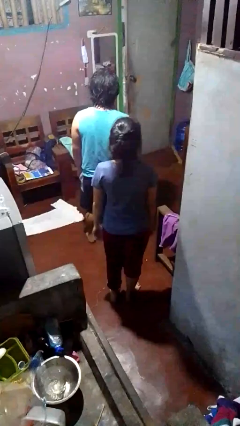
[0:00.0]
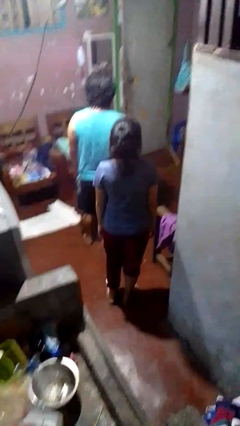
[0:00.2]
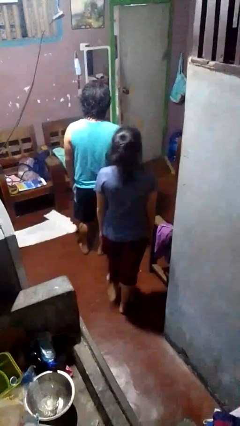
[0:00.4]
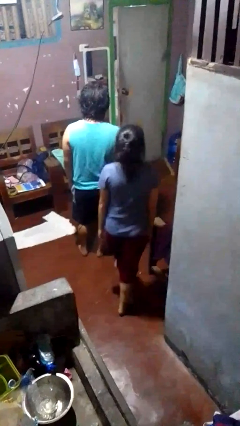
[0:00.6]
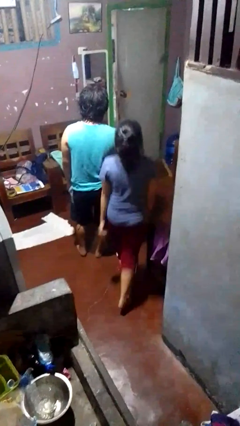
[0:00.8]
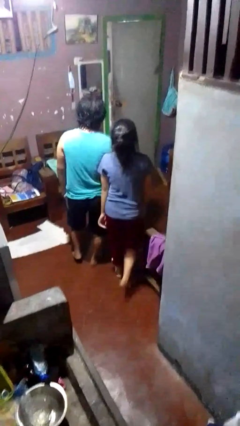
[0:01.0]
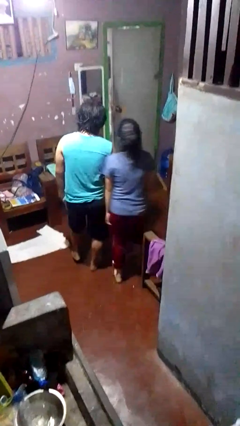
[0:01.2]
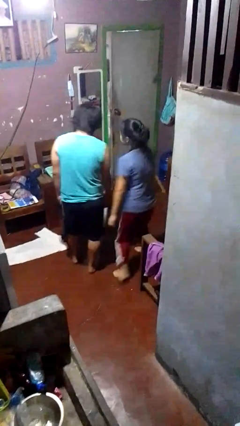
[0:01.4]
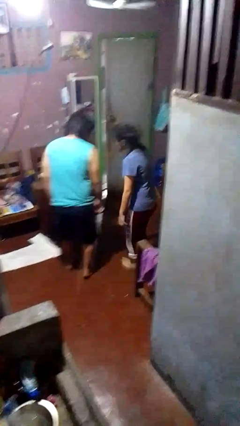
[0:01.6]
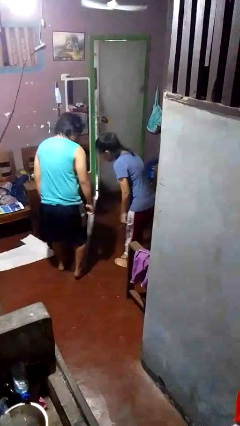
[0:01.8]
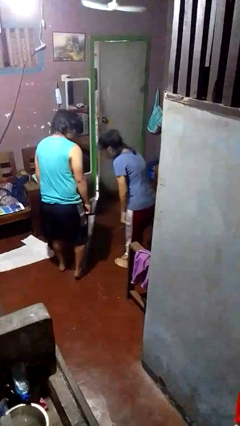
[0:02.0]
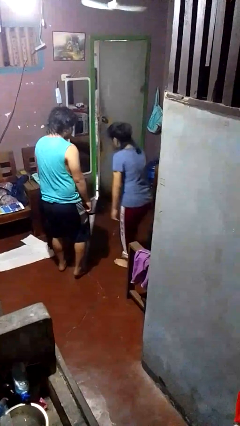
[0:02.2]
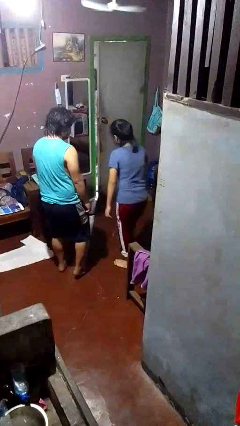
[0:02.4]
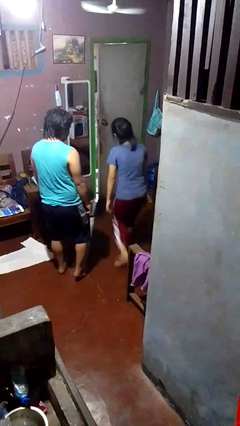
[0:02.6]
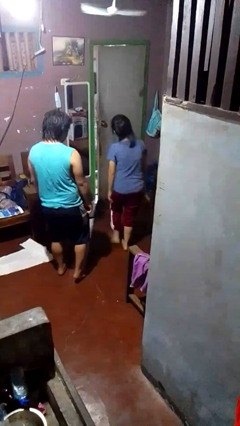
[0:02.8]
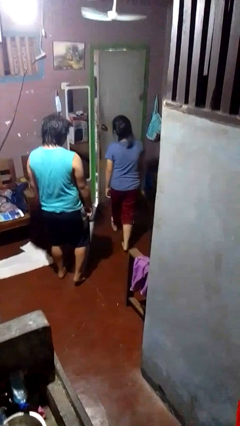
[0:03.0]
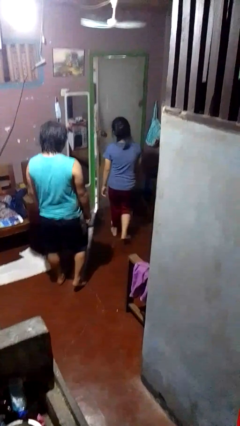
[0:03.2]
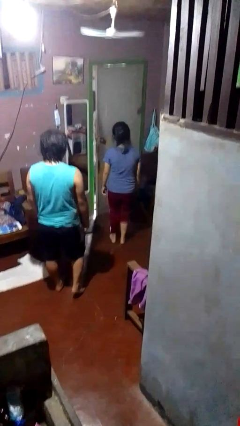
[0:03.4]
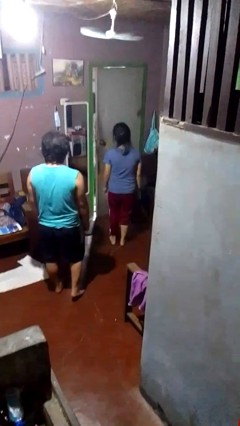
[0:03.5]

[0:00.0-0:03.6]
person bumps into person

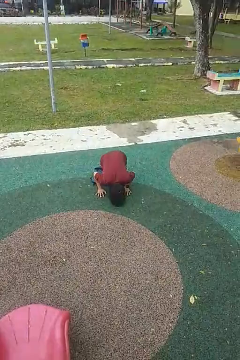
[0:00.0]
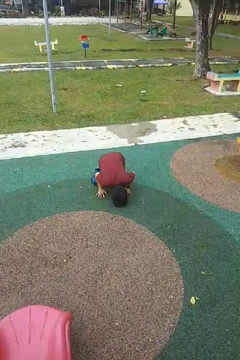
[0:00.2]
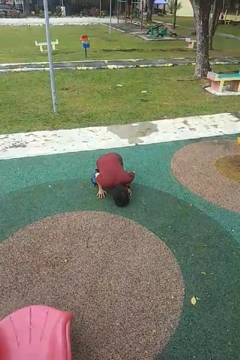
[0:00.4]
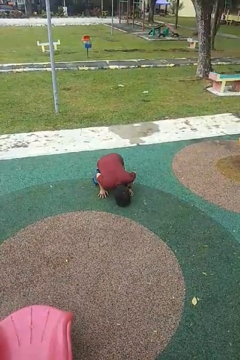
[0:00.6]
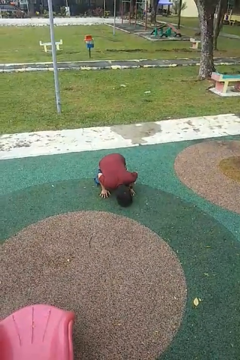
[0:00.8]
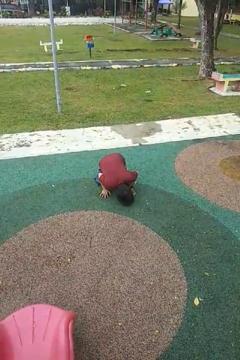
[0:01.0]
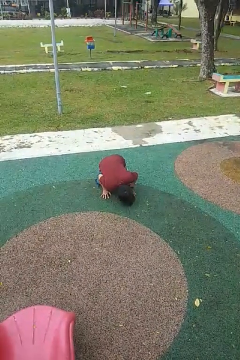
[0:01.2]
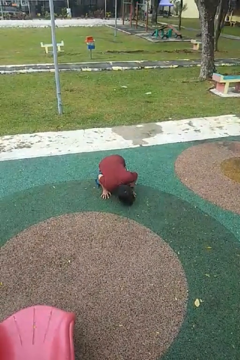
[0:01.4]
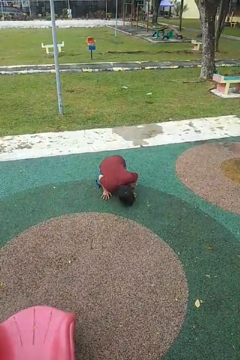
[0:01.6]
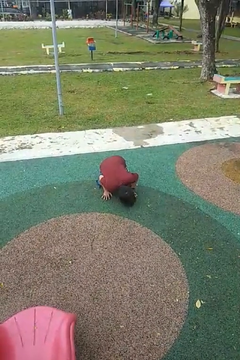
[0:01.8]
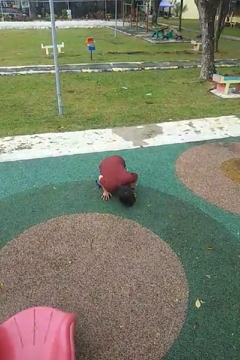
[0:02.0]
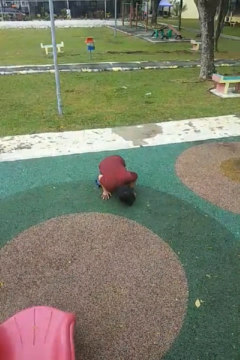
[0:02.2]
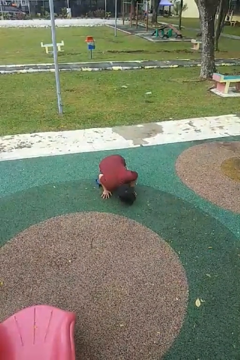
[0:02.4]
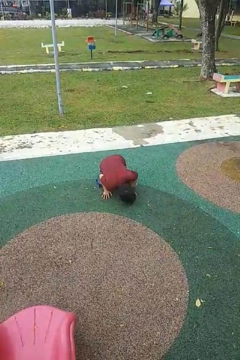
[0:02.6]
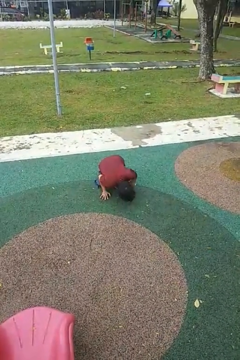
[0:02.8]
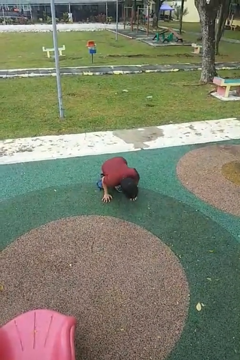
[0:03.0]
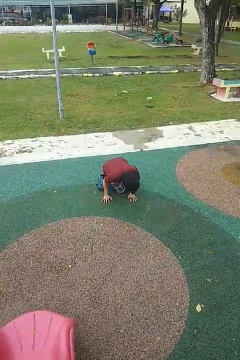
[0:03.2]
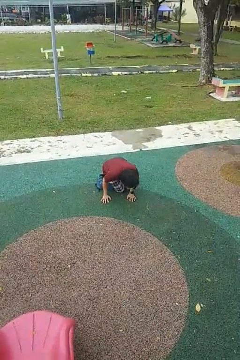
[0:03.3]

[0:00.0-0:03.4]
person lies down on floor

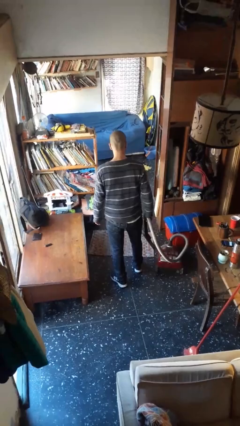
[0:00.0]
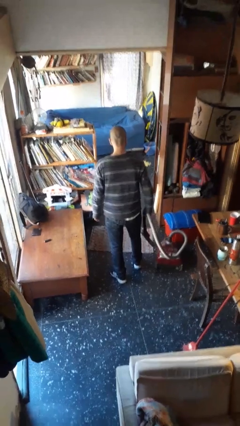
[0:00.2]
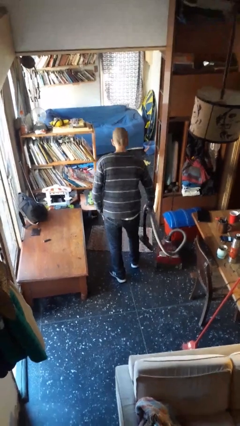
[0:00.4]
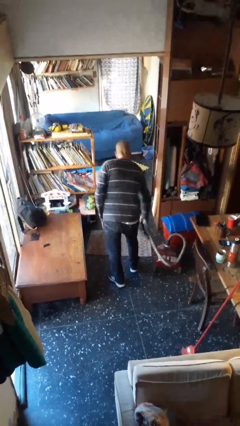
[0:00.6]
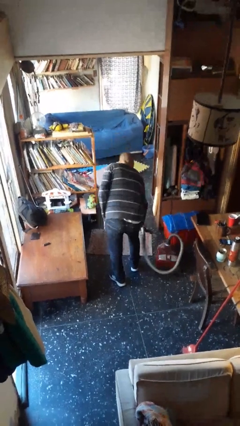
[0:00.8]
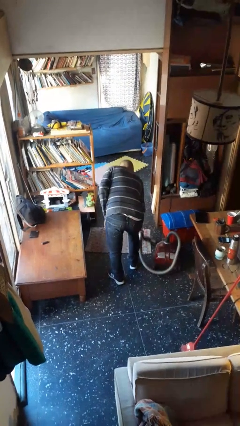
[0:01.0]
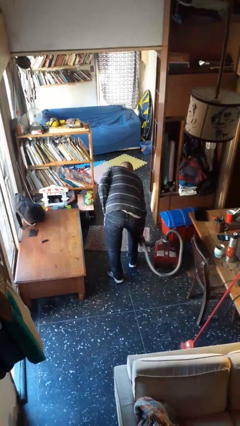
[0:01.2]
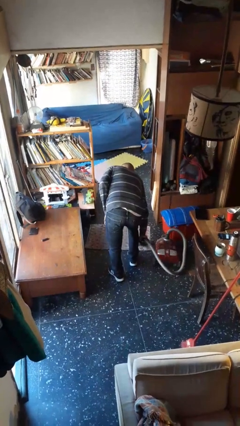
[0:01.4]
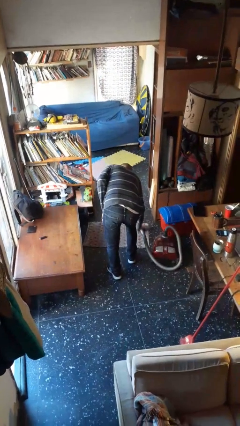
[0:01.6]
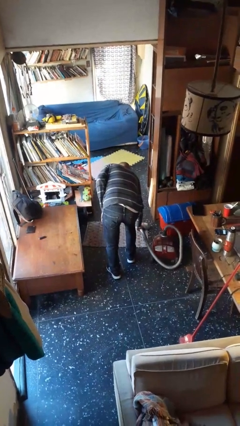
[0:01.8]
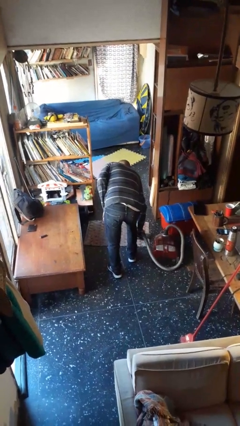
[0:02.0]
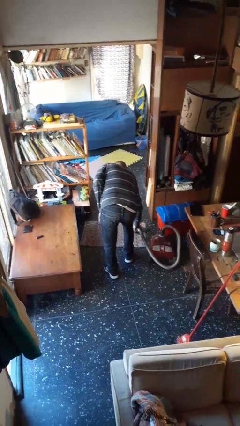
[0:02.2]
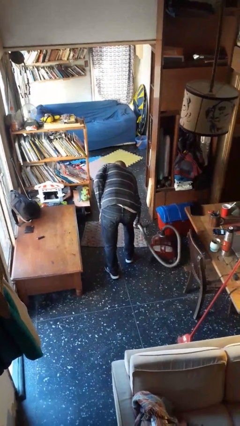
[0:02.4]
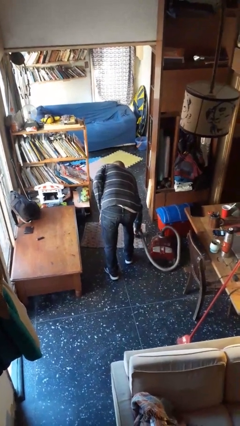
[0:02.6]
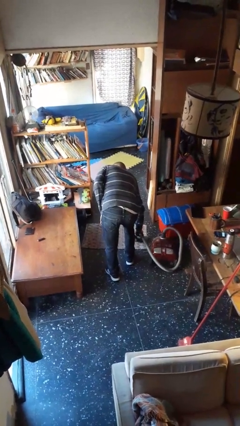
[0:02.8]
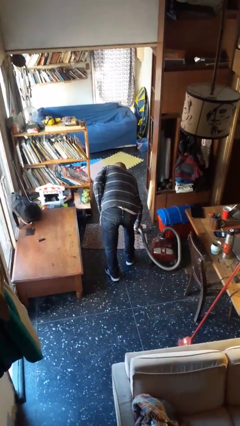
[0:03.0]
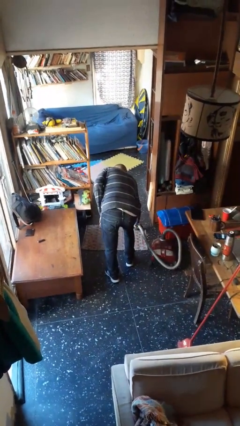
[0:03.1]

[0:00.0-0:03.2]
person vacuums carpet

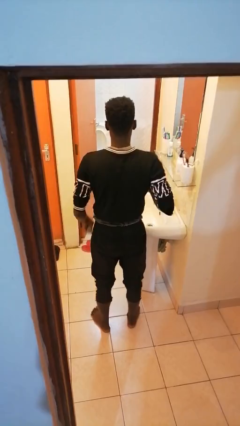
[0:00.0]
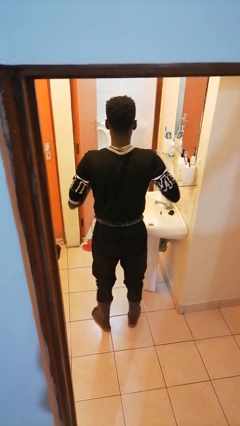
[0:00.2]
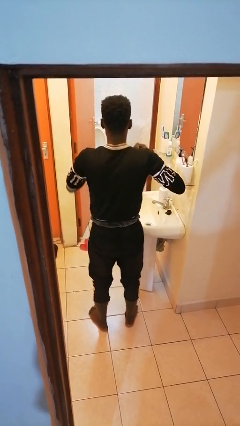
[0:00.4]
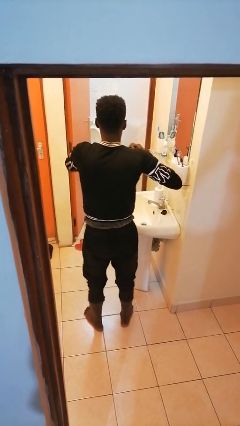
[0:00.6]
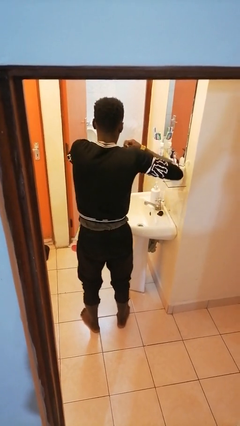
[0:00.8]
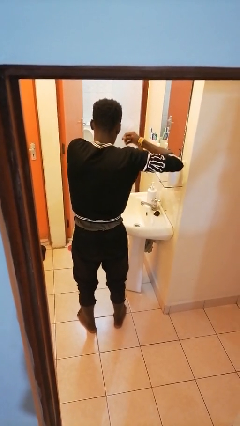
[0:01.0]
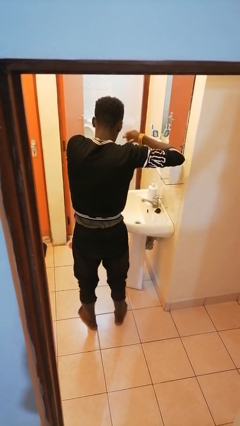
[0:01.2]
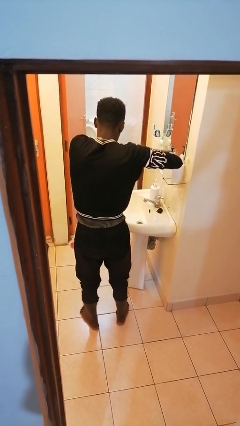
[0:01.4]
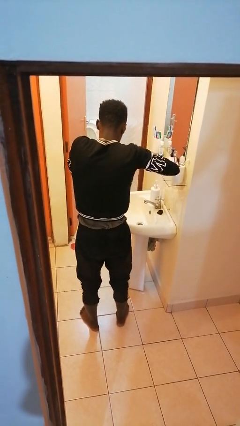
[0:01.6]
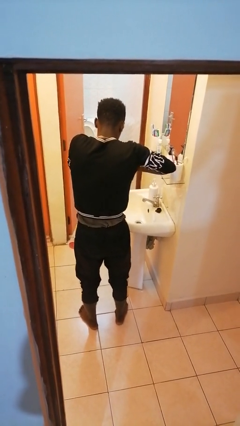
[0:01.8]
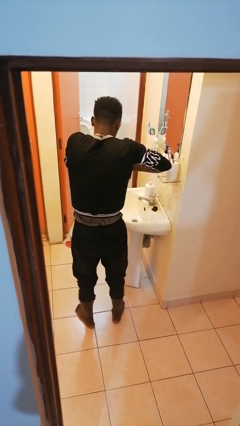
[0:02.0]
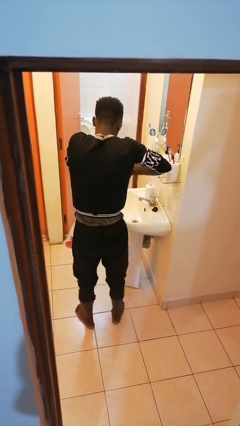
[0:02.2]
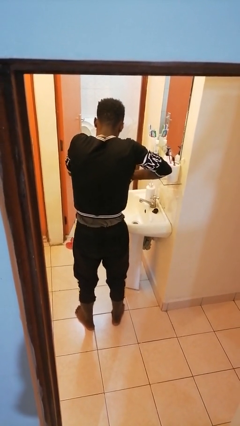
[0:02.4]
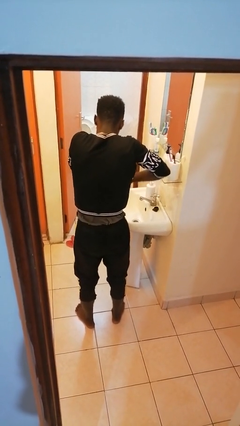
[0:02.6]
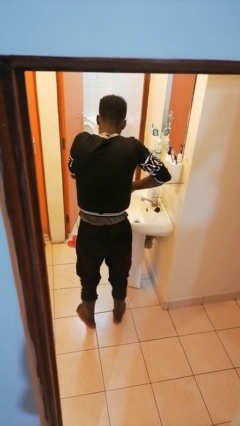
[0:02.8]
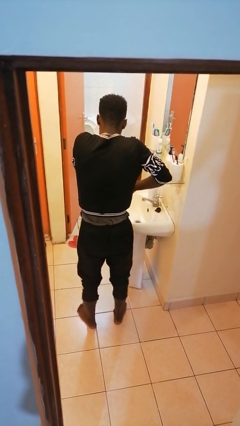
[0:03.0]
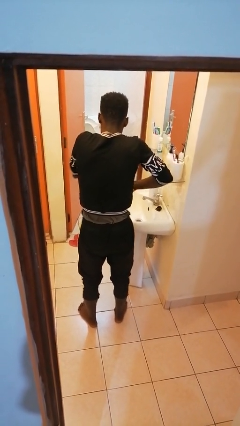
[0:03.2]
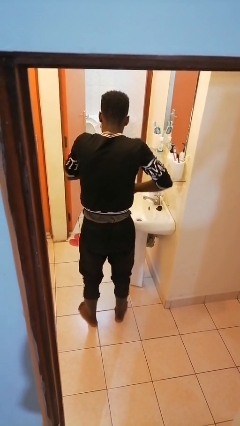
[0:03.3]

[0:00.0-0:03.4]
person applies deodorant

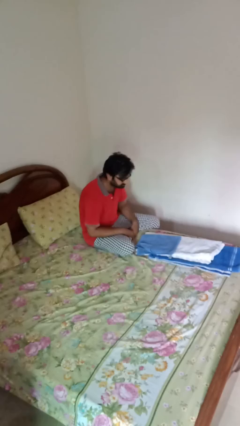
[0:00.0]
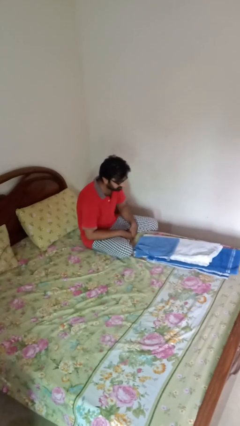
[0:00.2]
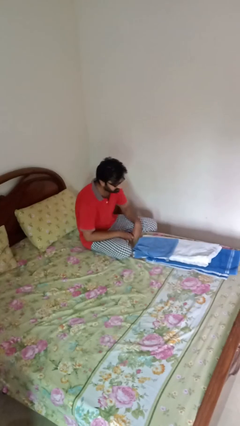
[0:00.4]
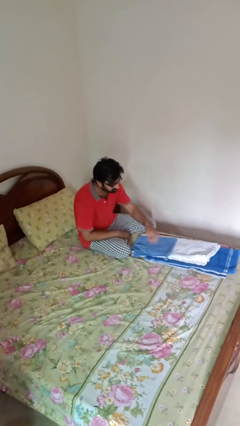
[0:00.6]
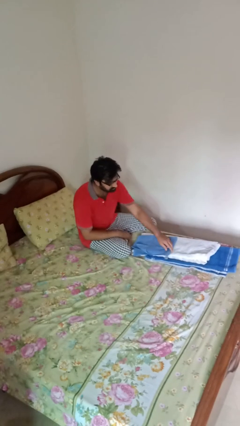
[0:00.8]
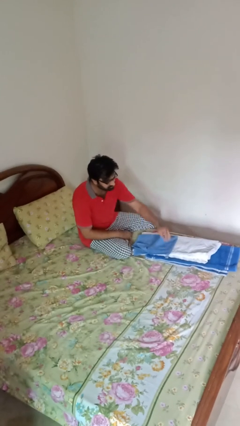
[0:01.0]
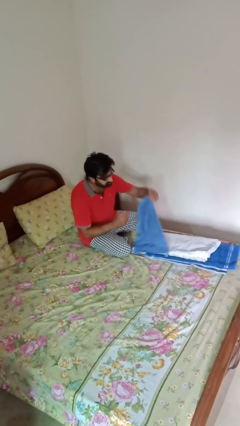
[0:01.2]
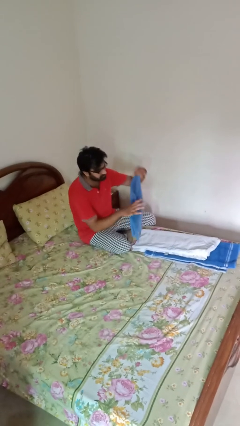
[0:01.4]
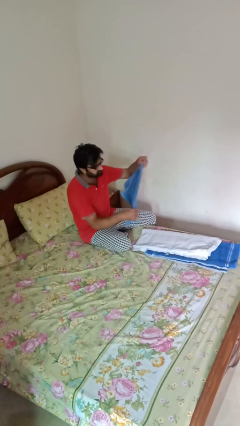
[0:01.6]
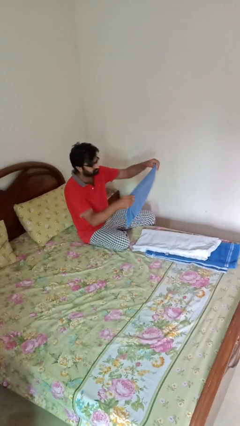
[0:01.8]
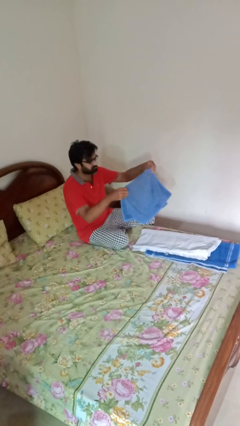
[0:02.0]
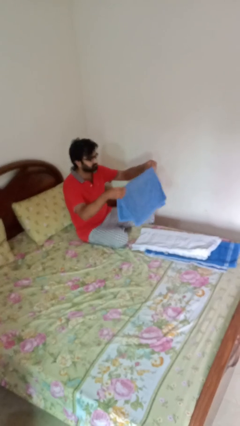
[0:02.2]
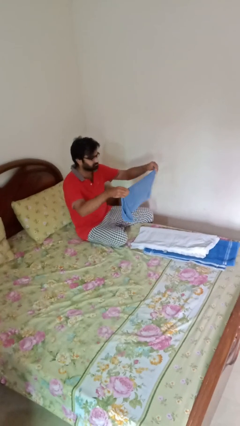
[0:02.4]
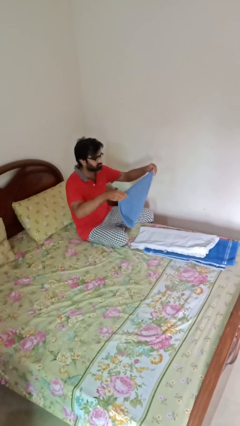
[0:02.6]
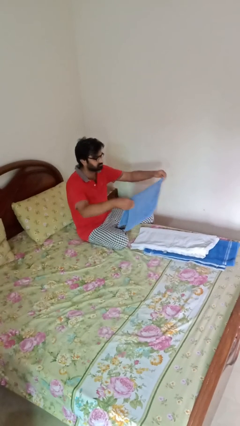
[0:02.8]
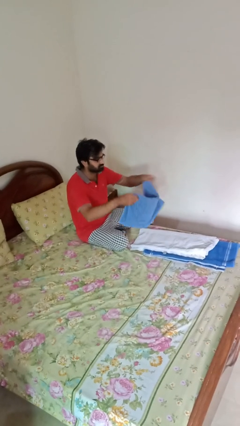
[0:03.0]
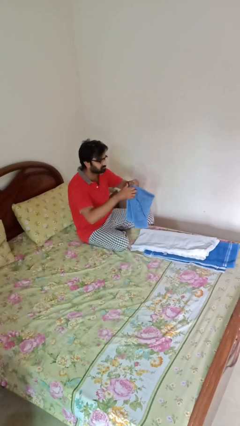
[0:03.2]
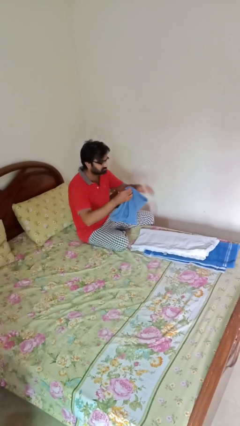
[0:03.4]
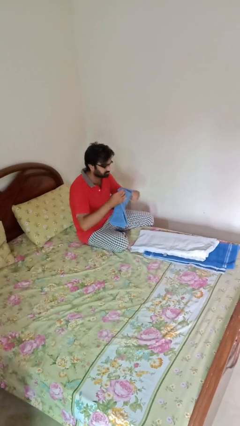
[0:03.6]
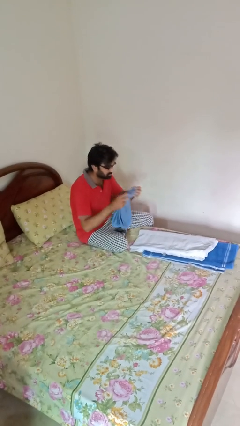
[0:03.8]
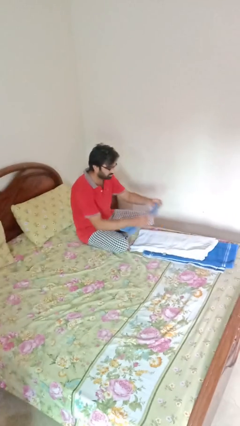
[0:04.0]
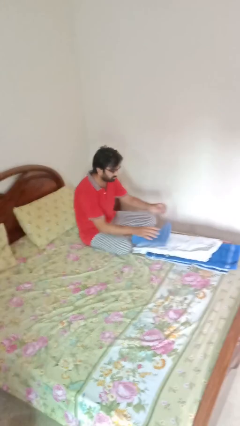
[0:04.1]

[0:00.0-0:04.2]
person folds towel

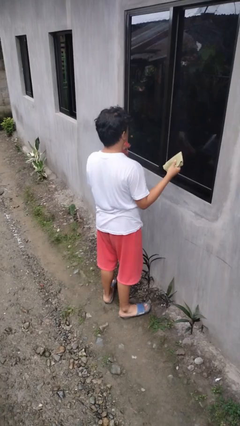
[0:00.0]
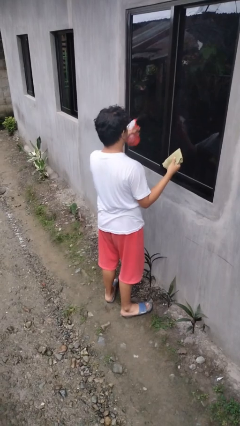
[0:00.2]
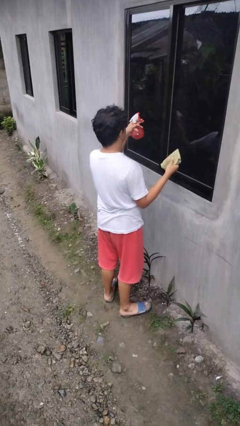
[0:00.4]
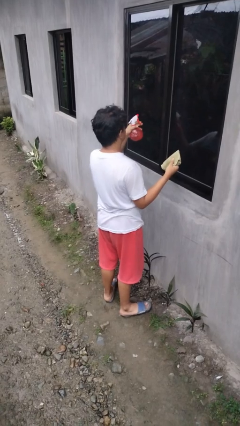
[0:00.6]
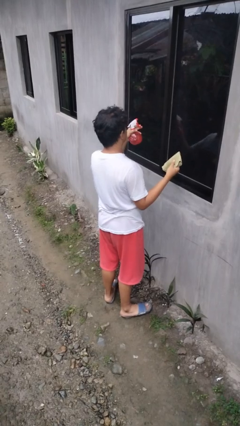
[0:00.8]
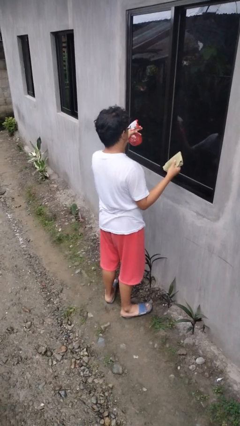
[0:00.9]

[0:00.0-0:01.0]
person sprays from bottle
